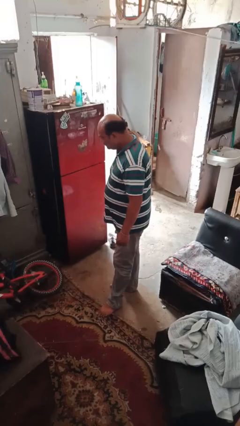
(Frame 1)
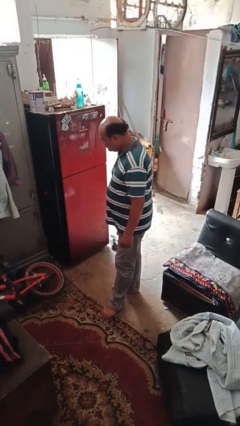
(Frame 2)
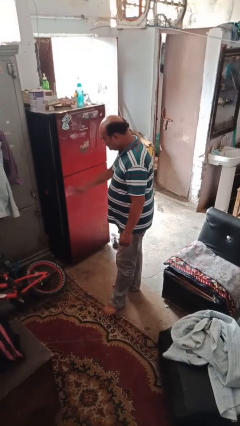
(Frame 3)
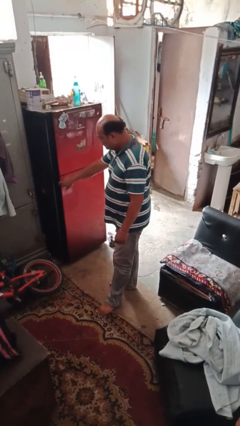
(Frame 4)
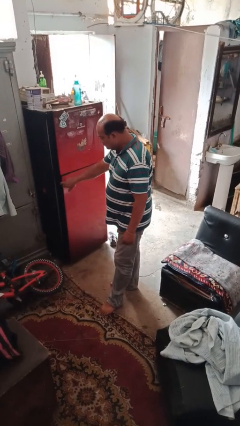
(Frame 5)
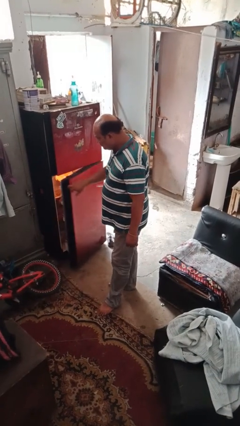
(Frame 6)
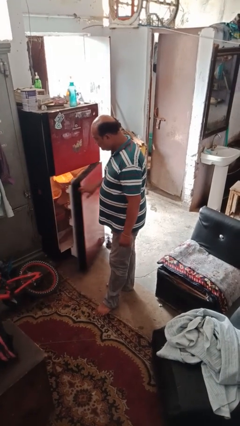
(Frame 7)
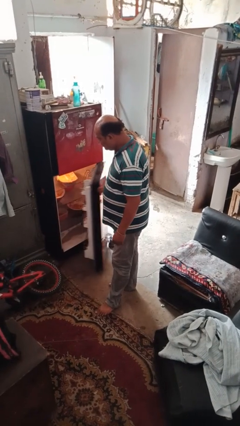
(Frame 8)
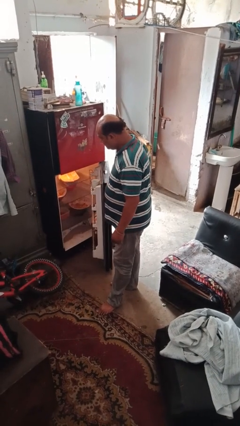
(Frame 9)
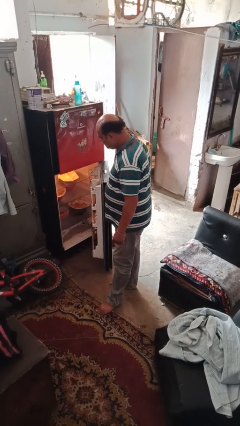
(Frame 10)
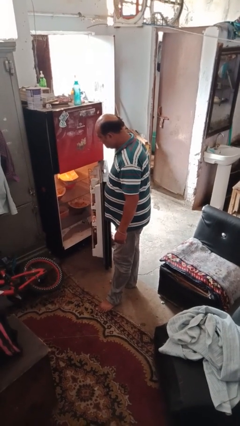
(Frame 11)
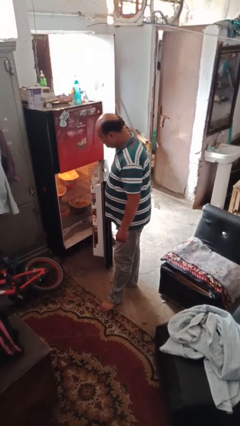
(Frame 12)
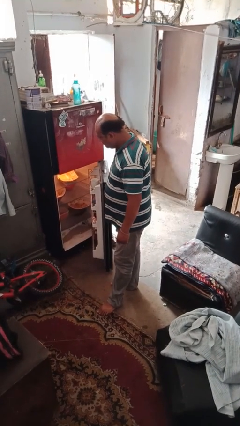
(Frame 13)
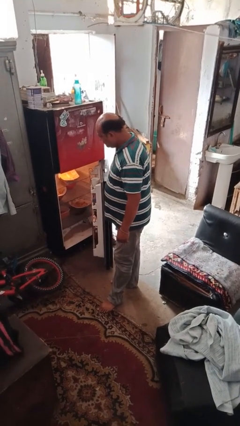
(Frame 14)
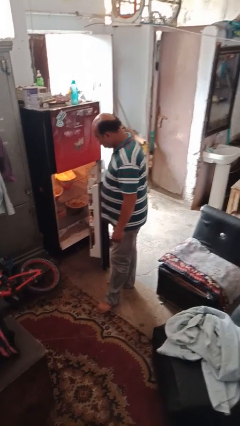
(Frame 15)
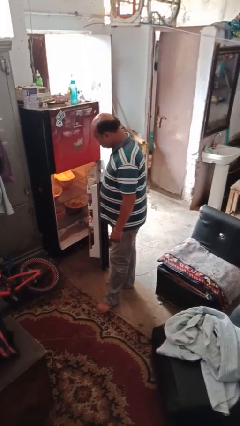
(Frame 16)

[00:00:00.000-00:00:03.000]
person opens refrigerator

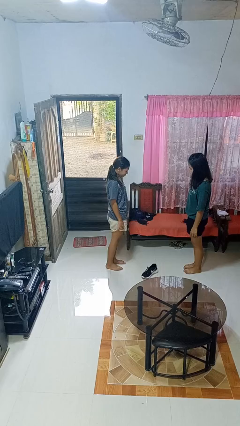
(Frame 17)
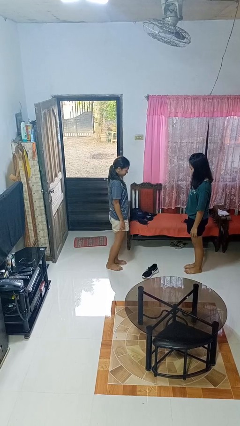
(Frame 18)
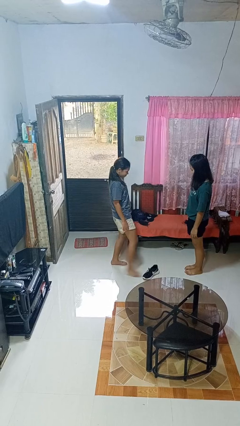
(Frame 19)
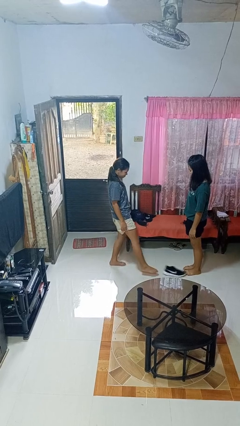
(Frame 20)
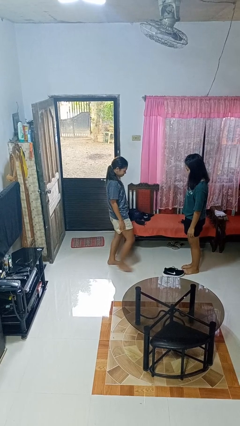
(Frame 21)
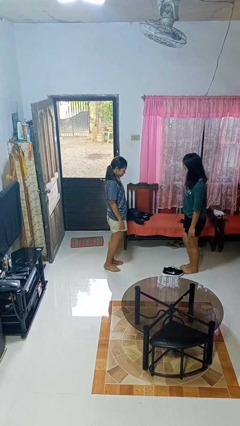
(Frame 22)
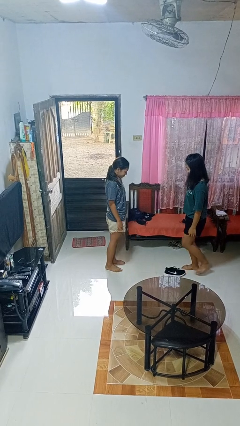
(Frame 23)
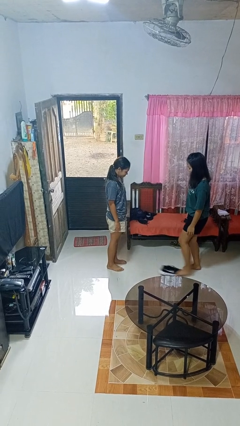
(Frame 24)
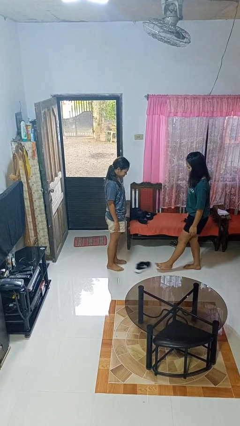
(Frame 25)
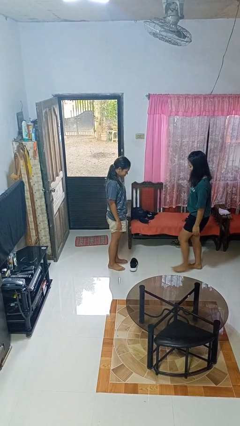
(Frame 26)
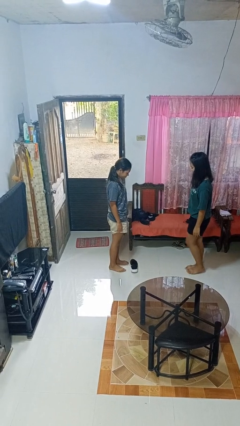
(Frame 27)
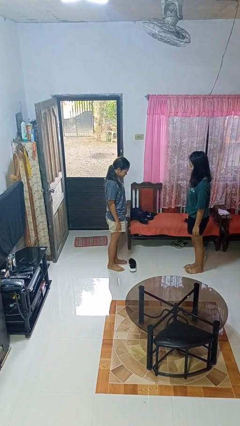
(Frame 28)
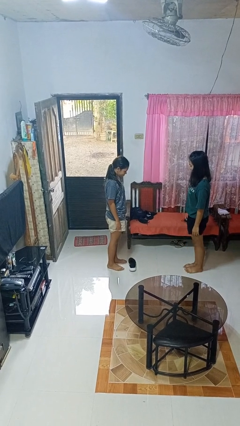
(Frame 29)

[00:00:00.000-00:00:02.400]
person kicks object to person

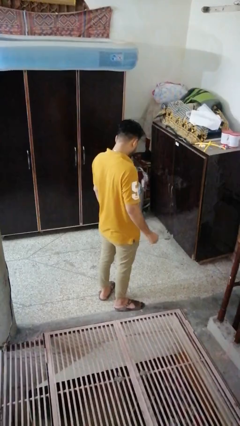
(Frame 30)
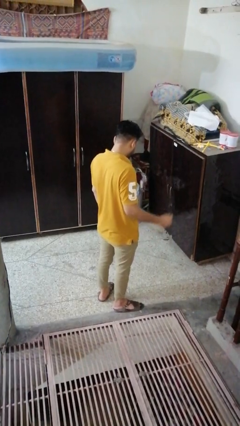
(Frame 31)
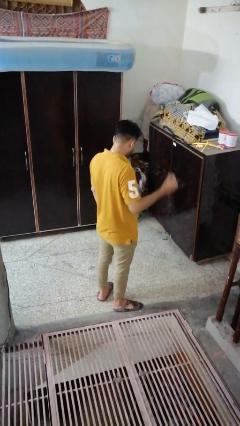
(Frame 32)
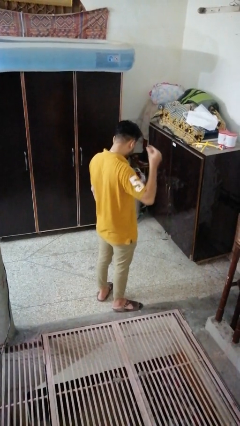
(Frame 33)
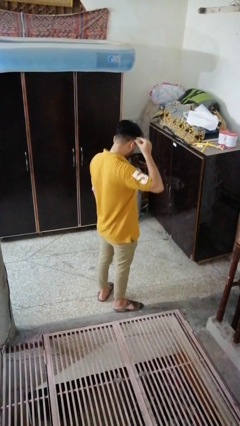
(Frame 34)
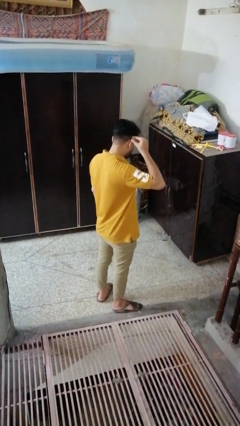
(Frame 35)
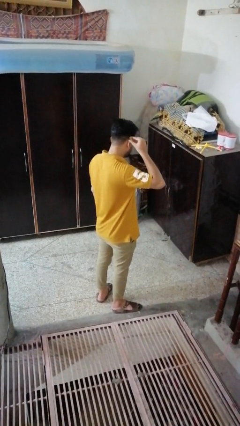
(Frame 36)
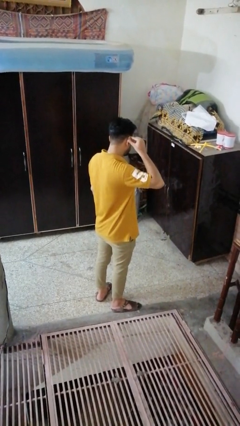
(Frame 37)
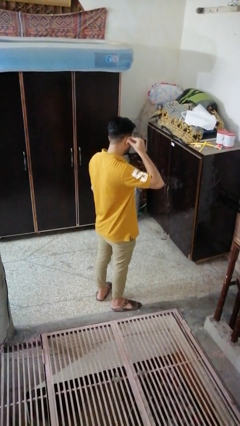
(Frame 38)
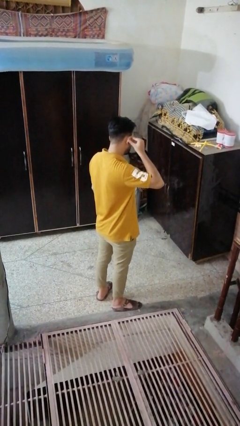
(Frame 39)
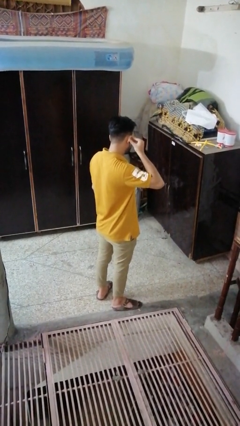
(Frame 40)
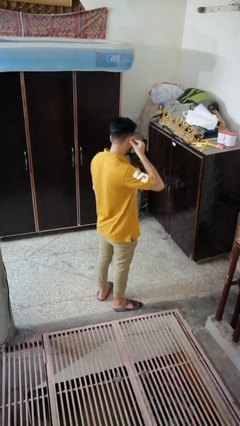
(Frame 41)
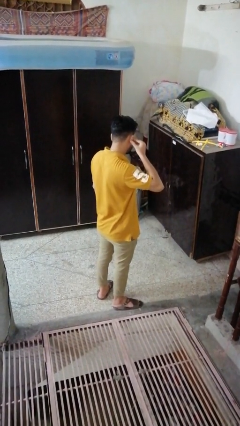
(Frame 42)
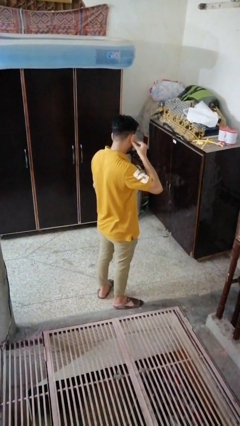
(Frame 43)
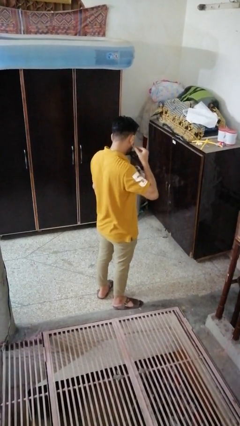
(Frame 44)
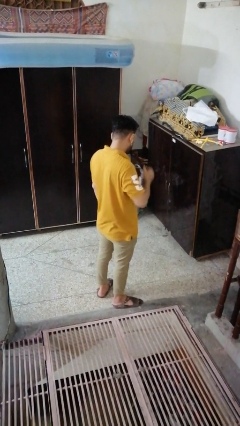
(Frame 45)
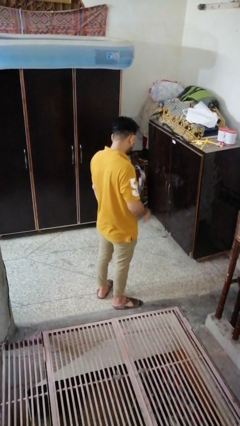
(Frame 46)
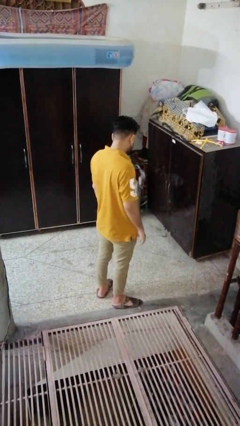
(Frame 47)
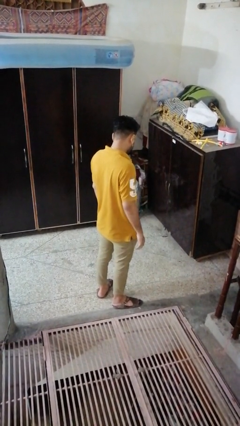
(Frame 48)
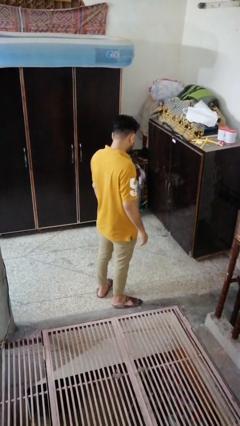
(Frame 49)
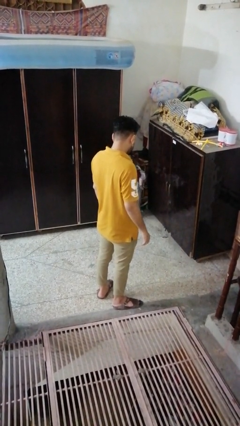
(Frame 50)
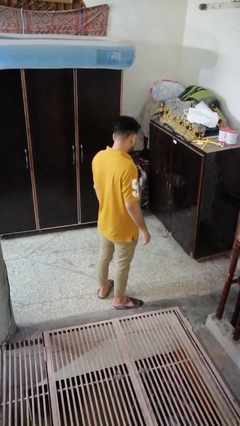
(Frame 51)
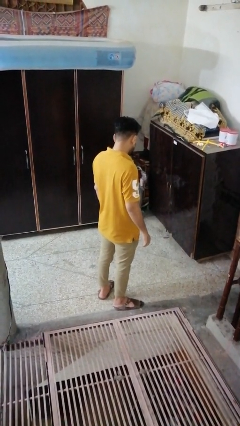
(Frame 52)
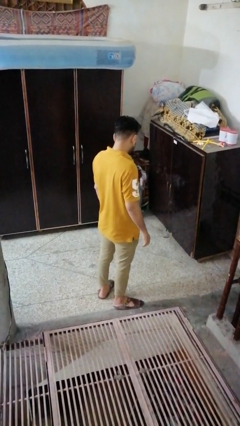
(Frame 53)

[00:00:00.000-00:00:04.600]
person puts on earrings

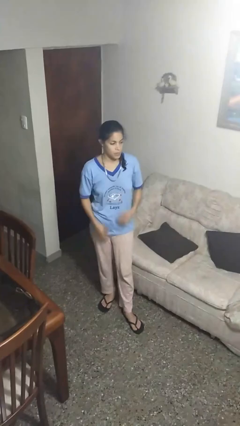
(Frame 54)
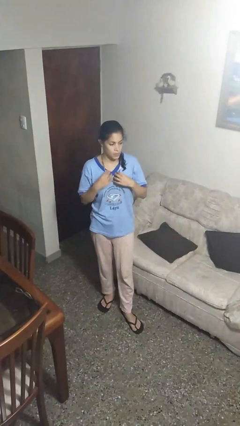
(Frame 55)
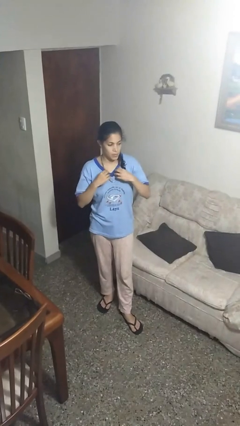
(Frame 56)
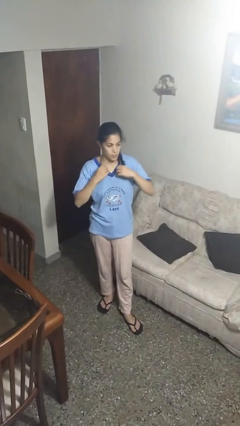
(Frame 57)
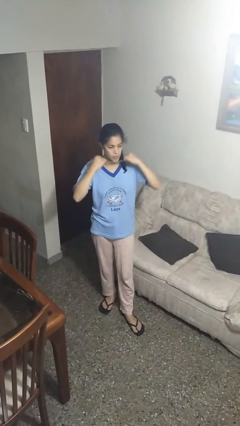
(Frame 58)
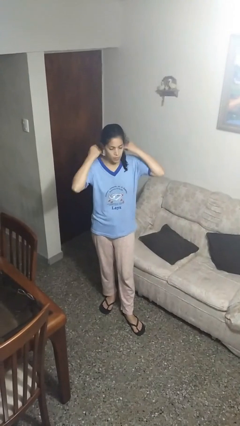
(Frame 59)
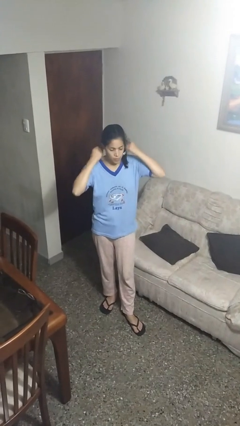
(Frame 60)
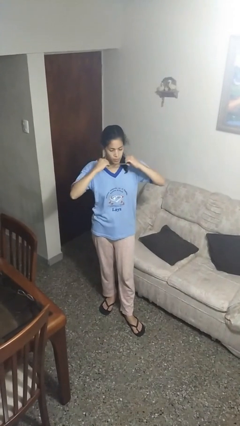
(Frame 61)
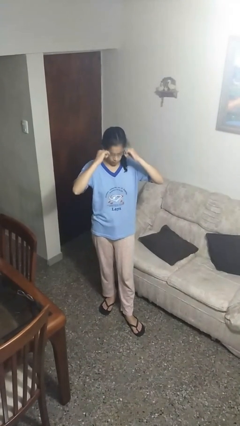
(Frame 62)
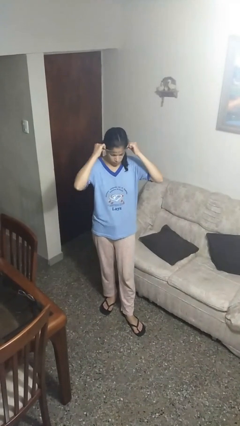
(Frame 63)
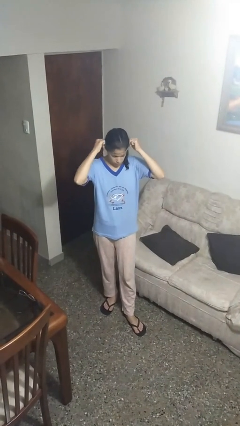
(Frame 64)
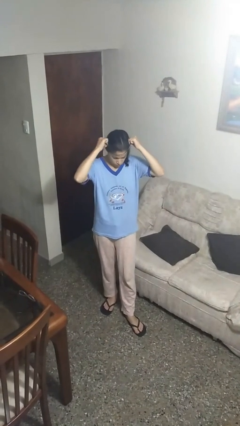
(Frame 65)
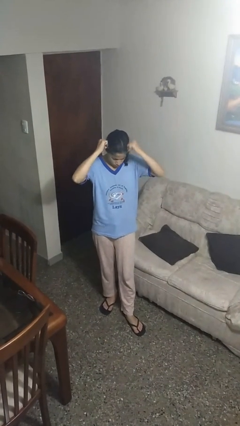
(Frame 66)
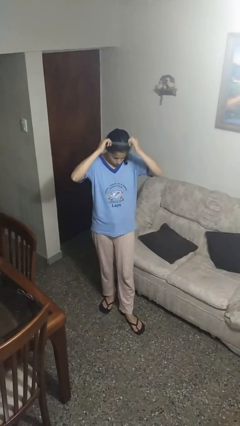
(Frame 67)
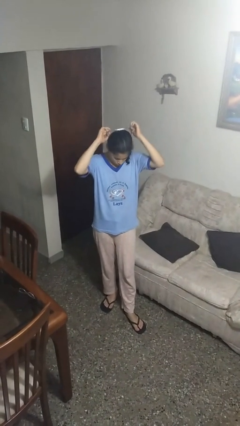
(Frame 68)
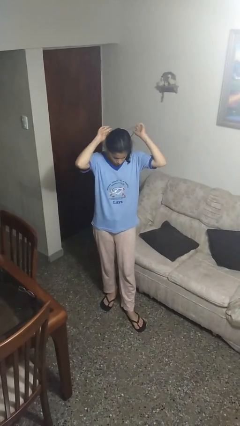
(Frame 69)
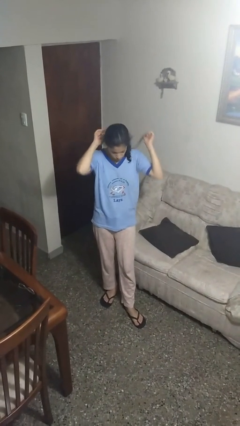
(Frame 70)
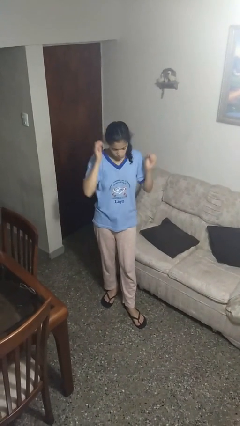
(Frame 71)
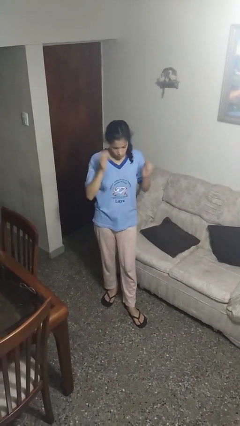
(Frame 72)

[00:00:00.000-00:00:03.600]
person takes off necklace

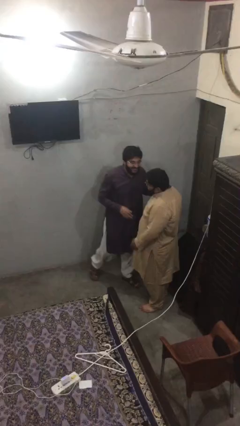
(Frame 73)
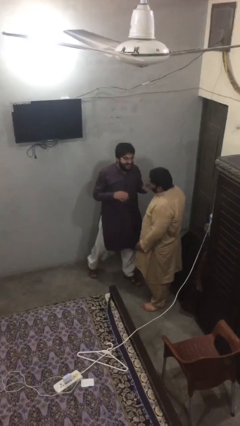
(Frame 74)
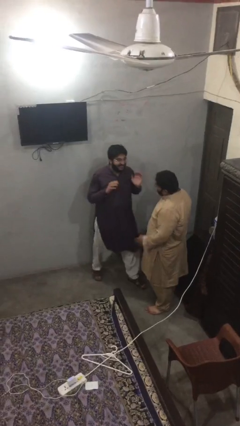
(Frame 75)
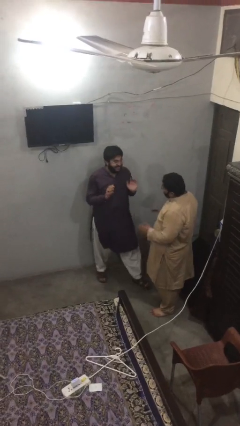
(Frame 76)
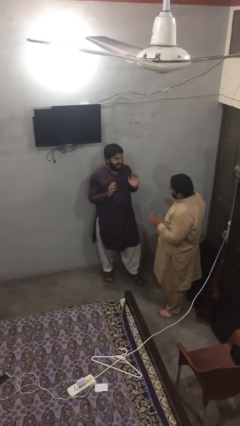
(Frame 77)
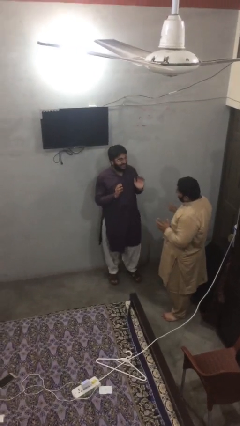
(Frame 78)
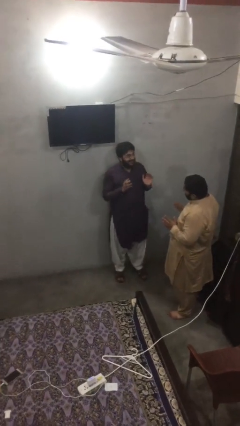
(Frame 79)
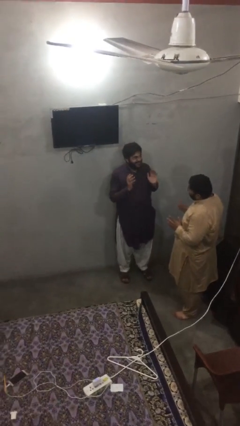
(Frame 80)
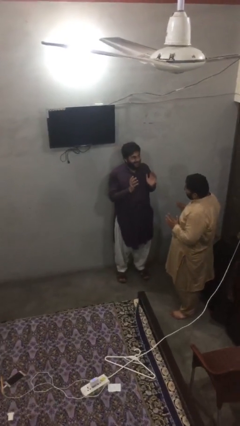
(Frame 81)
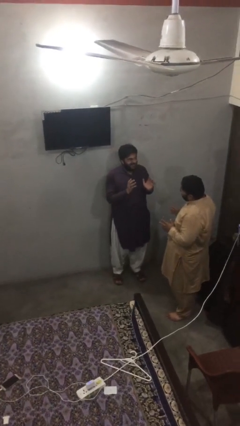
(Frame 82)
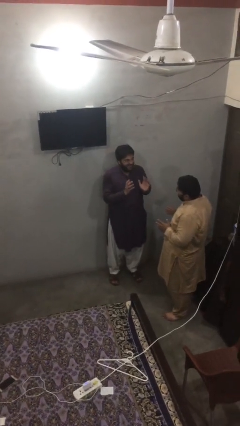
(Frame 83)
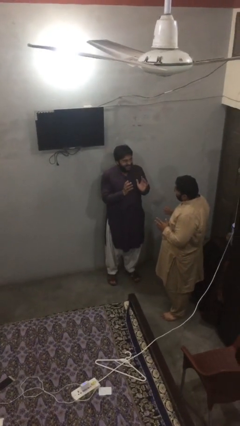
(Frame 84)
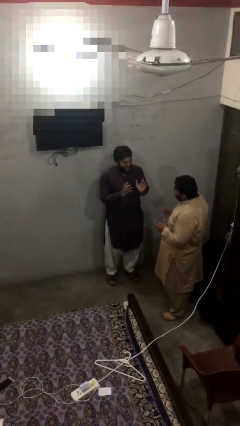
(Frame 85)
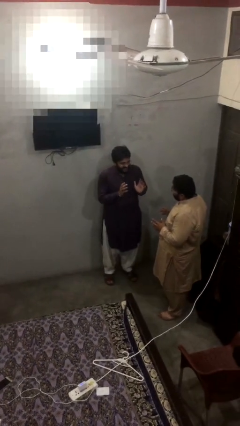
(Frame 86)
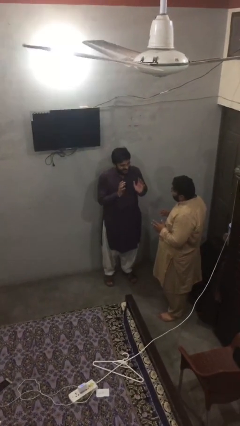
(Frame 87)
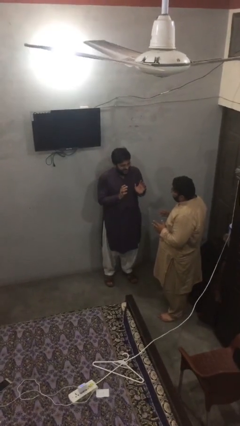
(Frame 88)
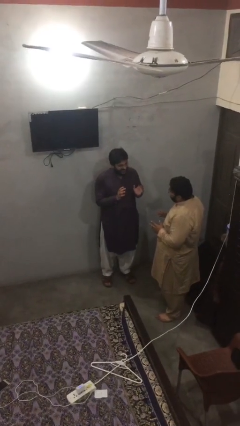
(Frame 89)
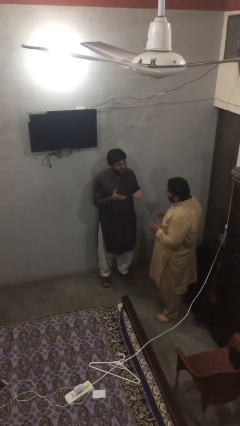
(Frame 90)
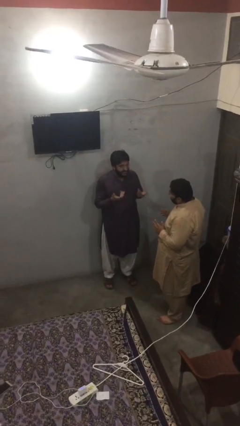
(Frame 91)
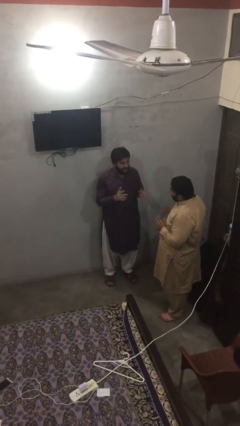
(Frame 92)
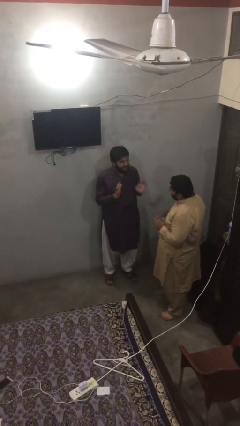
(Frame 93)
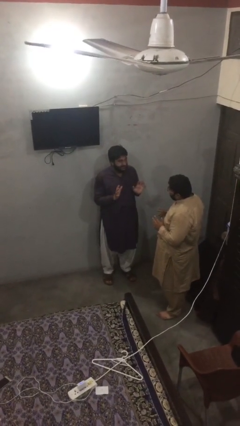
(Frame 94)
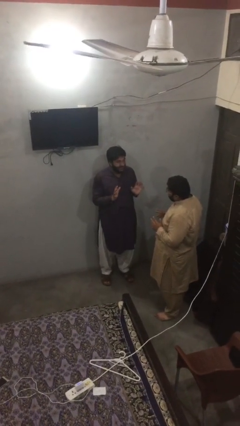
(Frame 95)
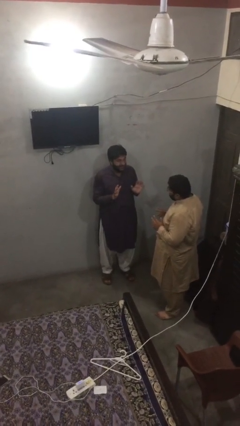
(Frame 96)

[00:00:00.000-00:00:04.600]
person talks to person
